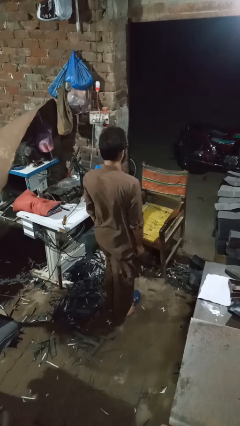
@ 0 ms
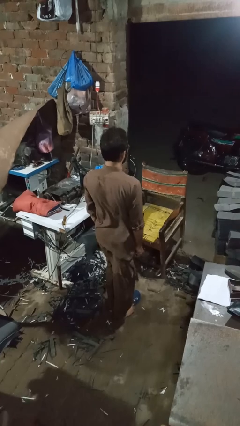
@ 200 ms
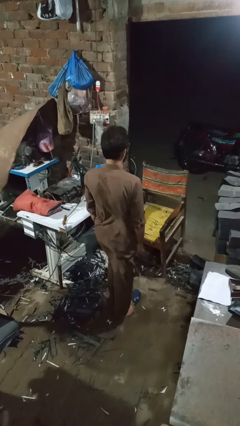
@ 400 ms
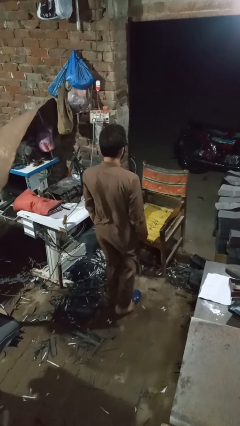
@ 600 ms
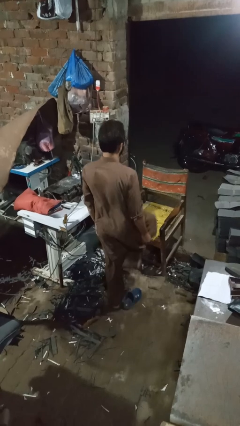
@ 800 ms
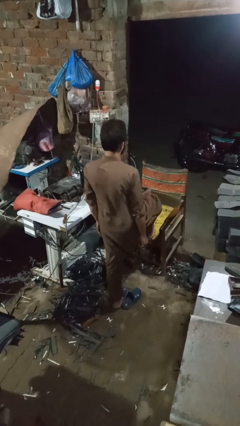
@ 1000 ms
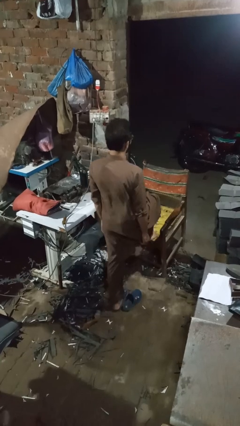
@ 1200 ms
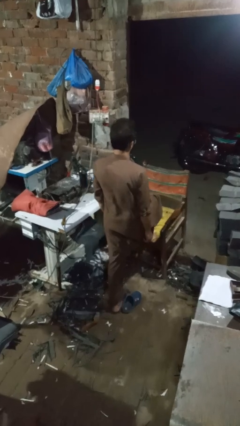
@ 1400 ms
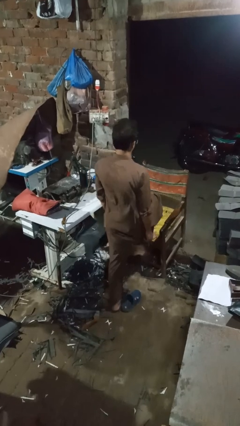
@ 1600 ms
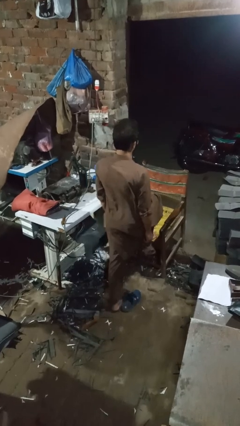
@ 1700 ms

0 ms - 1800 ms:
person stubs toe

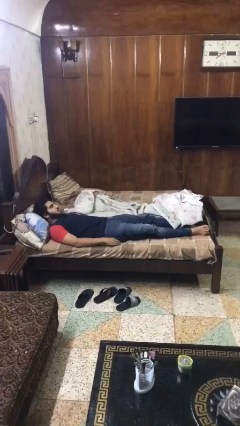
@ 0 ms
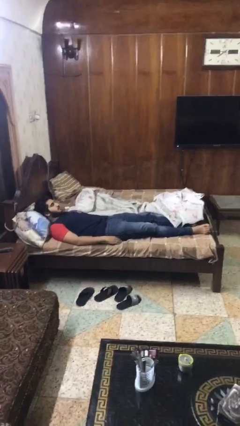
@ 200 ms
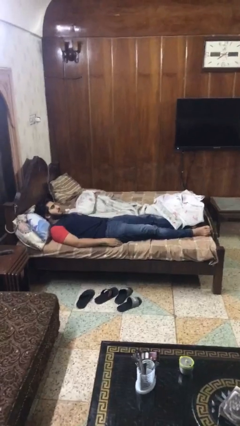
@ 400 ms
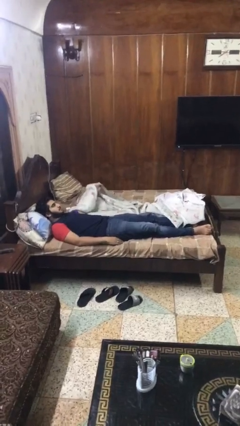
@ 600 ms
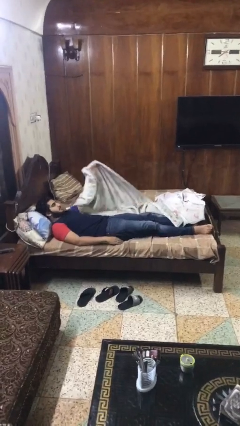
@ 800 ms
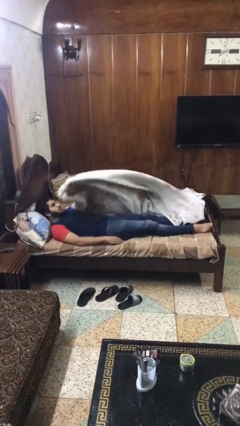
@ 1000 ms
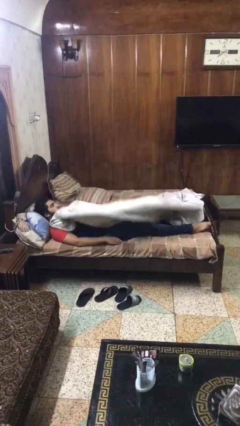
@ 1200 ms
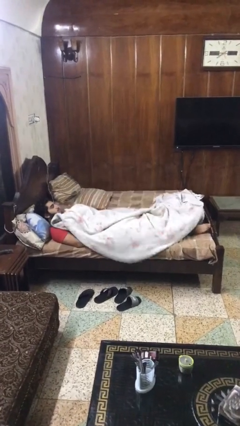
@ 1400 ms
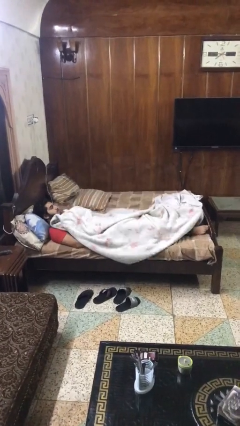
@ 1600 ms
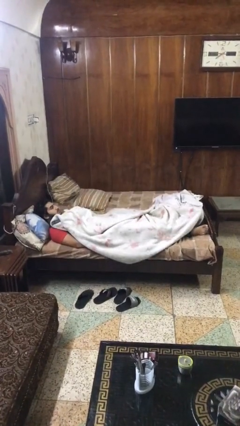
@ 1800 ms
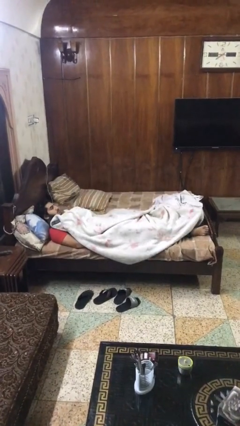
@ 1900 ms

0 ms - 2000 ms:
person covers with blanket

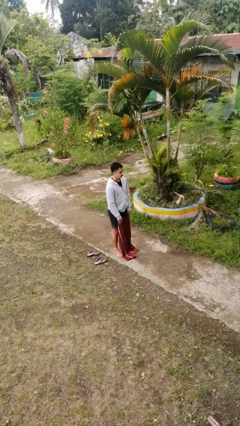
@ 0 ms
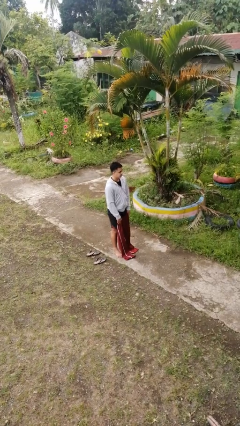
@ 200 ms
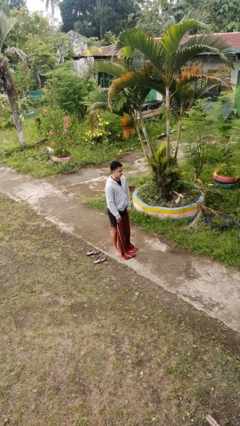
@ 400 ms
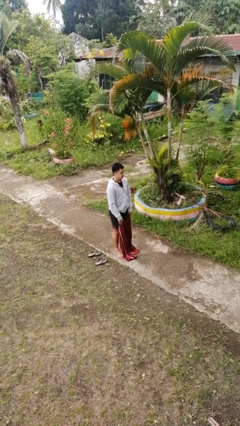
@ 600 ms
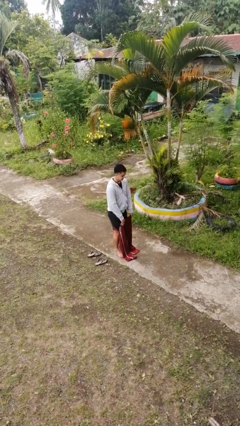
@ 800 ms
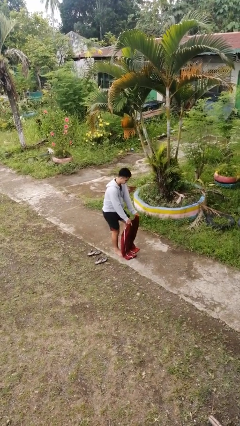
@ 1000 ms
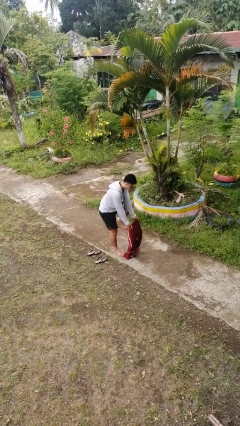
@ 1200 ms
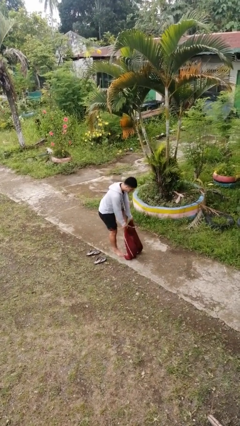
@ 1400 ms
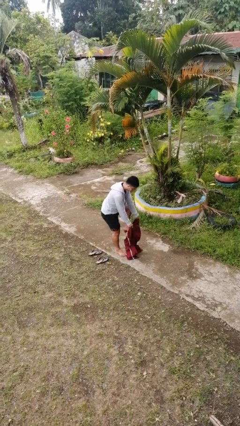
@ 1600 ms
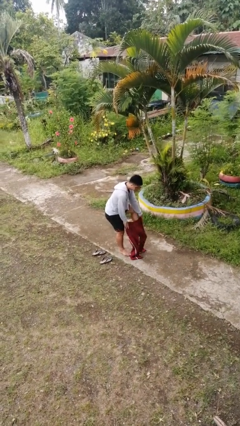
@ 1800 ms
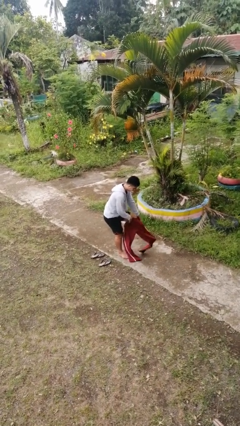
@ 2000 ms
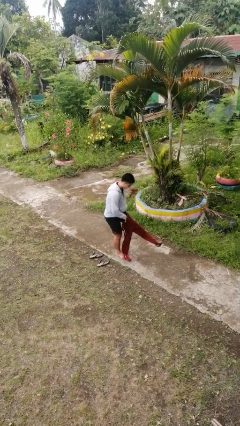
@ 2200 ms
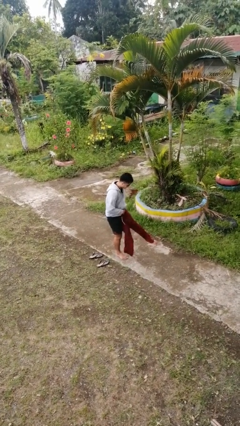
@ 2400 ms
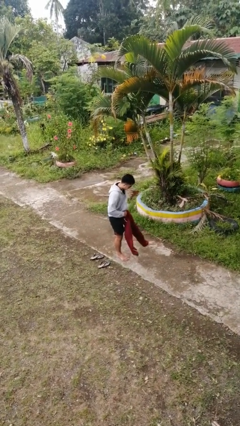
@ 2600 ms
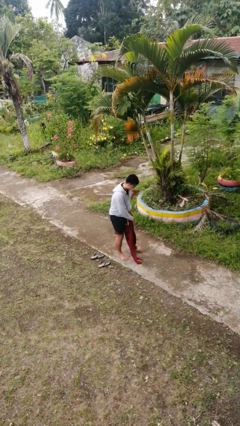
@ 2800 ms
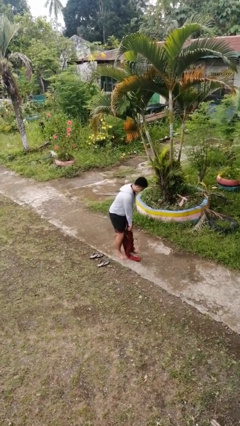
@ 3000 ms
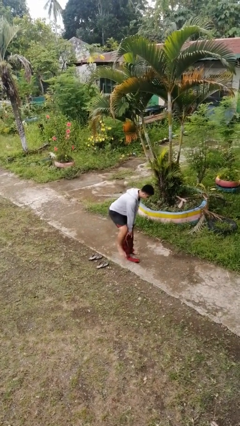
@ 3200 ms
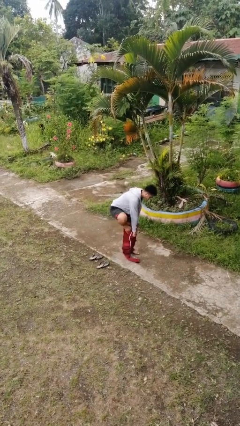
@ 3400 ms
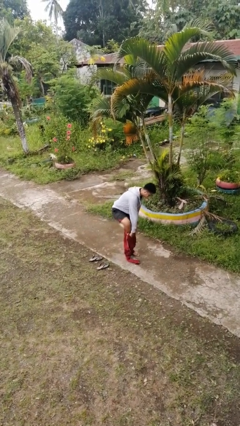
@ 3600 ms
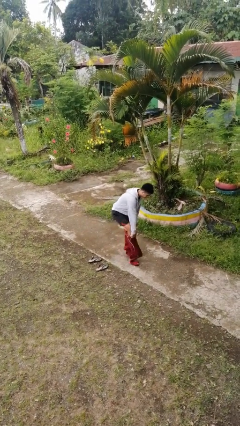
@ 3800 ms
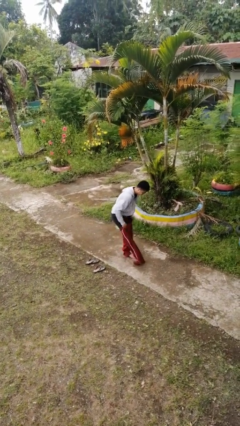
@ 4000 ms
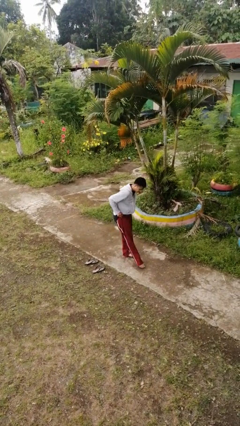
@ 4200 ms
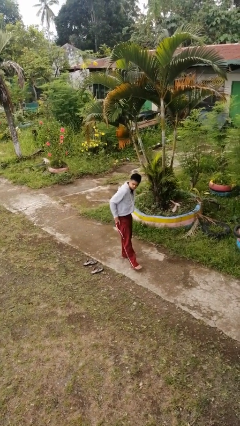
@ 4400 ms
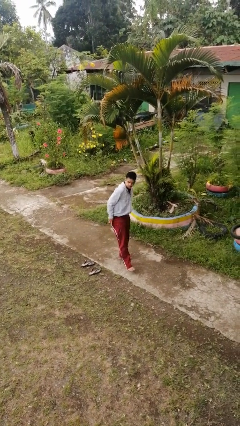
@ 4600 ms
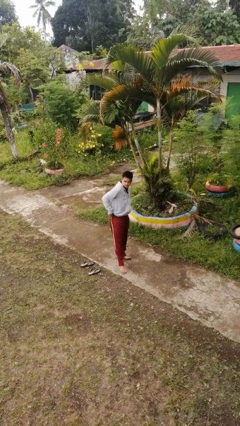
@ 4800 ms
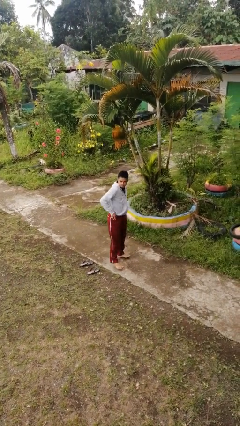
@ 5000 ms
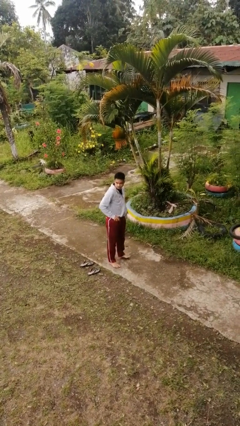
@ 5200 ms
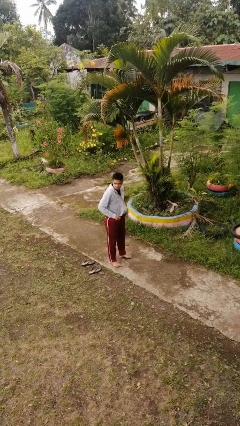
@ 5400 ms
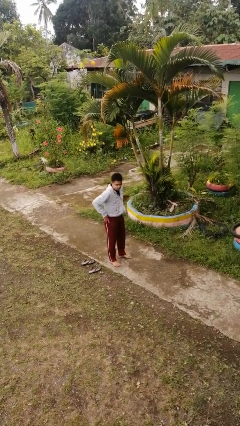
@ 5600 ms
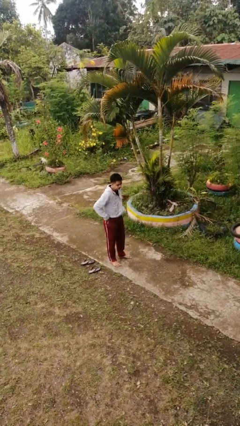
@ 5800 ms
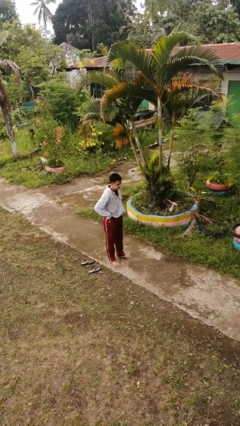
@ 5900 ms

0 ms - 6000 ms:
person takes off pants

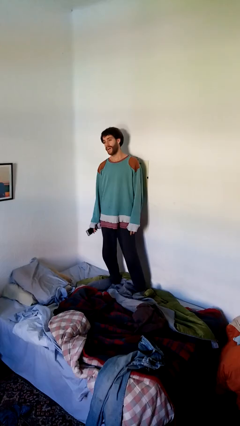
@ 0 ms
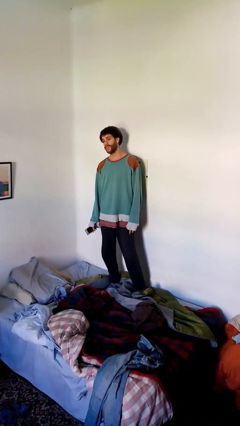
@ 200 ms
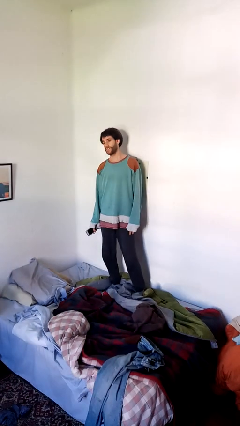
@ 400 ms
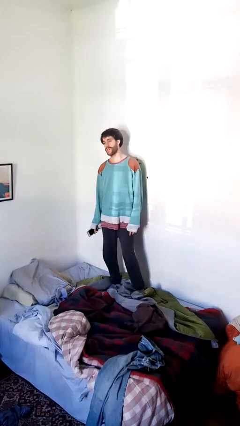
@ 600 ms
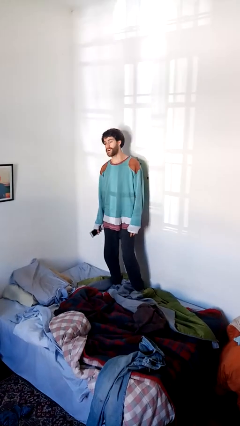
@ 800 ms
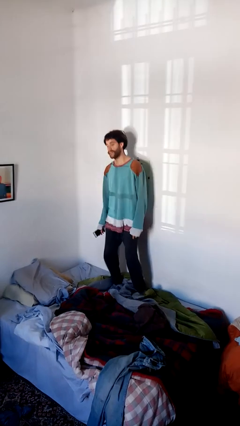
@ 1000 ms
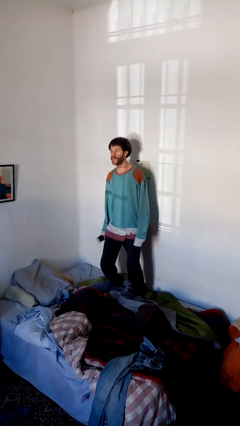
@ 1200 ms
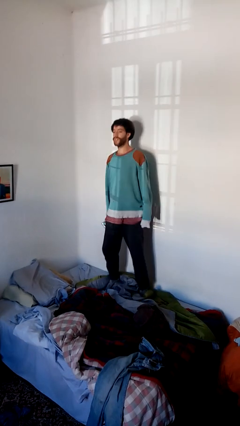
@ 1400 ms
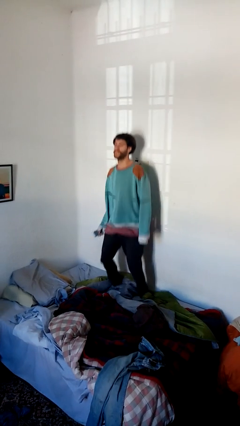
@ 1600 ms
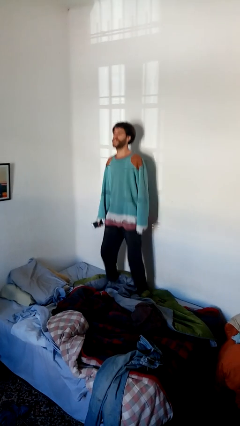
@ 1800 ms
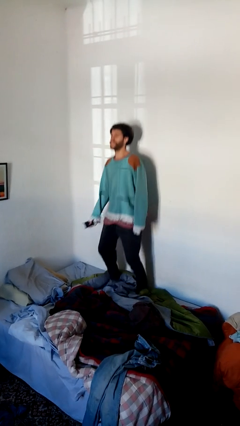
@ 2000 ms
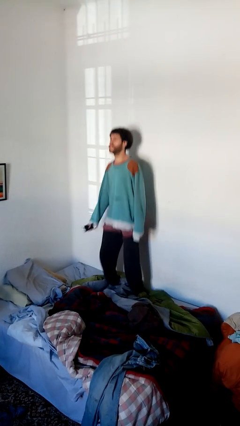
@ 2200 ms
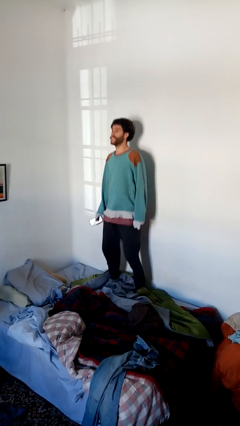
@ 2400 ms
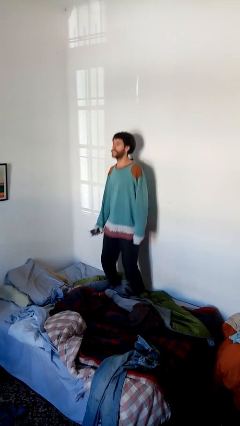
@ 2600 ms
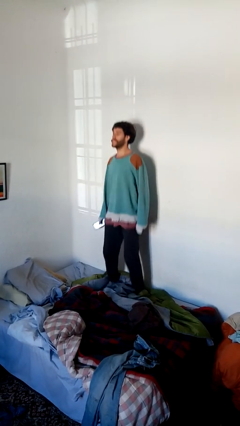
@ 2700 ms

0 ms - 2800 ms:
person jumps on bed

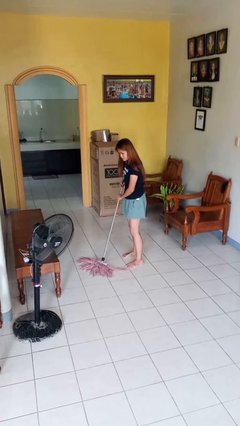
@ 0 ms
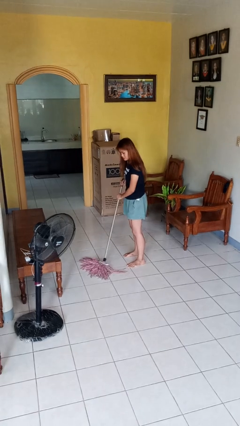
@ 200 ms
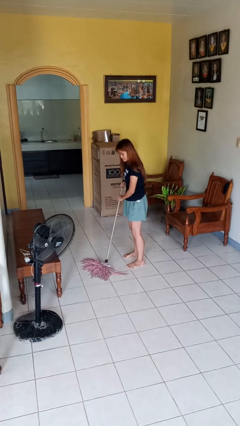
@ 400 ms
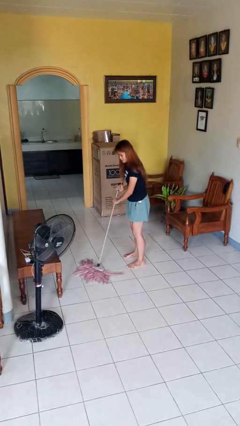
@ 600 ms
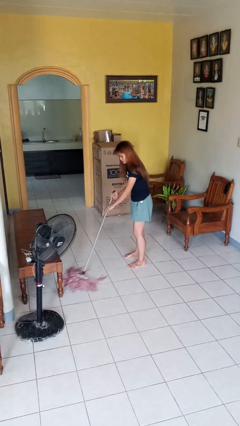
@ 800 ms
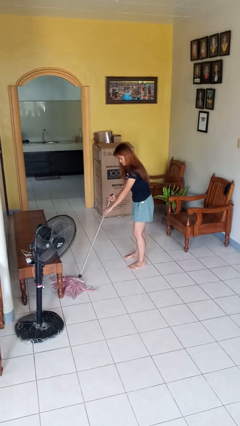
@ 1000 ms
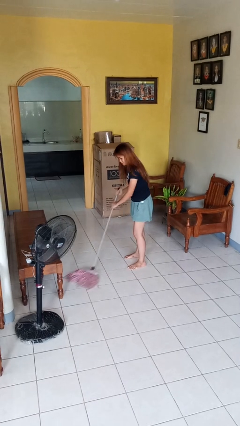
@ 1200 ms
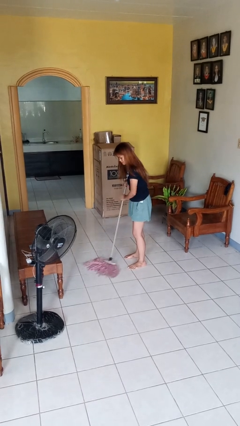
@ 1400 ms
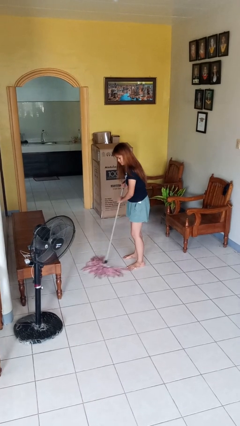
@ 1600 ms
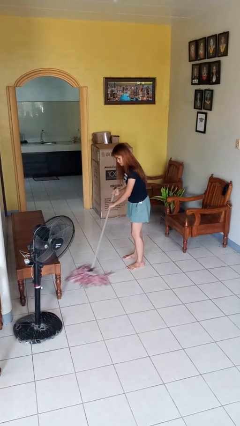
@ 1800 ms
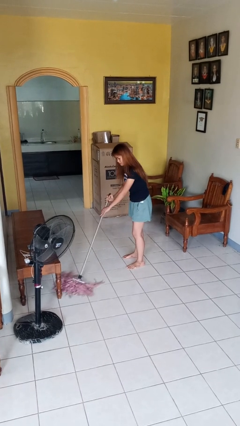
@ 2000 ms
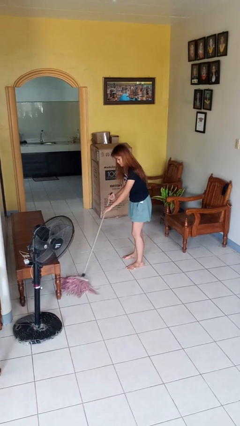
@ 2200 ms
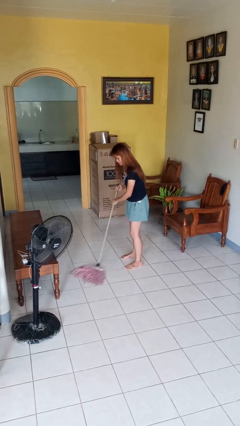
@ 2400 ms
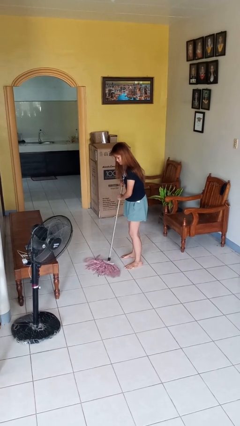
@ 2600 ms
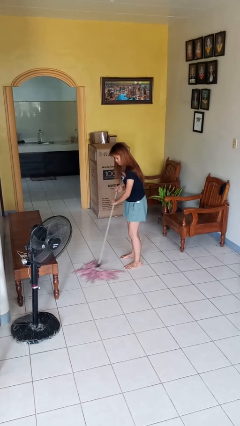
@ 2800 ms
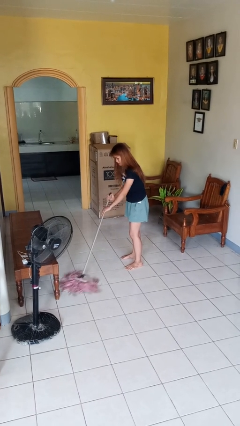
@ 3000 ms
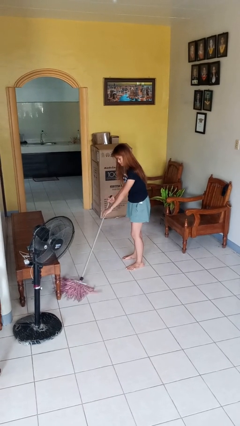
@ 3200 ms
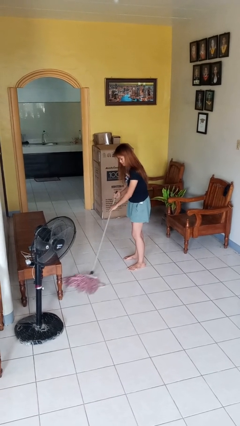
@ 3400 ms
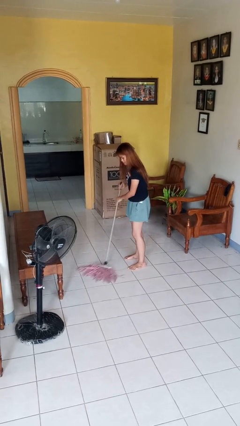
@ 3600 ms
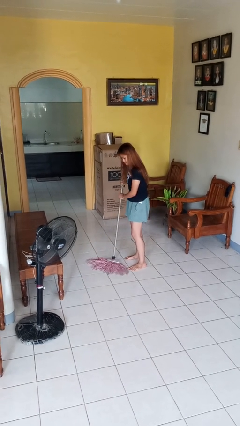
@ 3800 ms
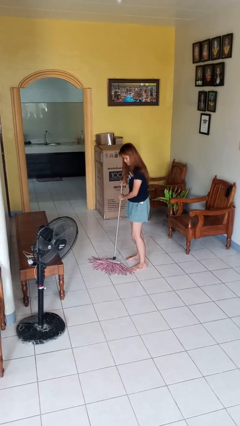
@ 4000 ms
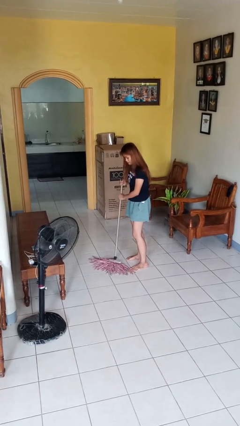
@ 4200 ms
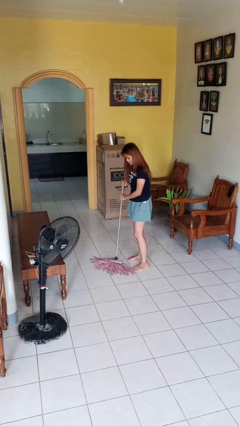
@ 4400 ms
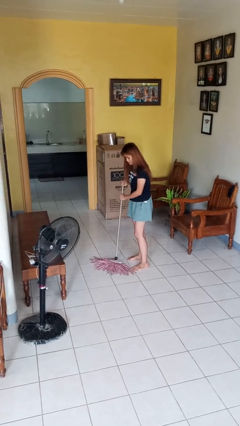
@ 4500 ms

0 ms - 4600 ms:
person mops
